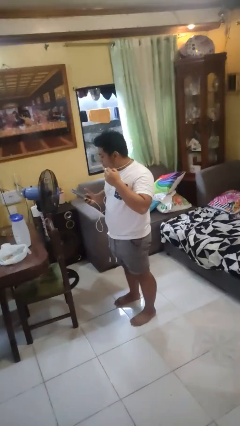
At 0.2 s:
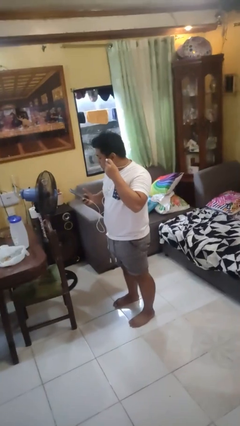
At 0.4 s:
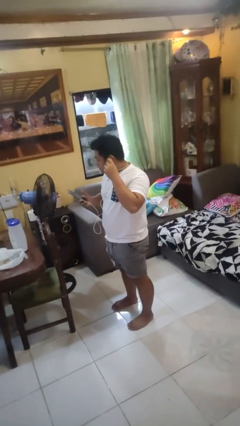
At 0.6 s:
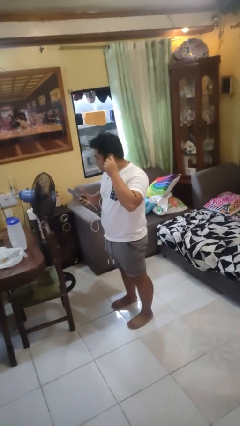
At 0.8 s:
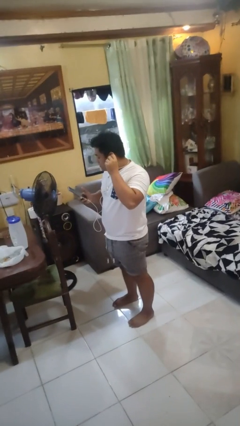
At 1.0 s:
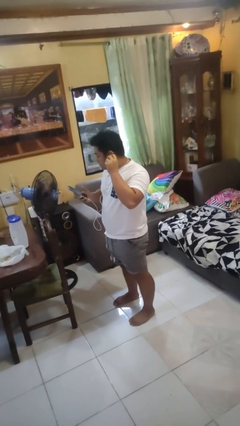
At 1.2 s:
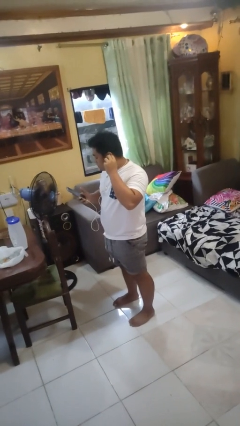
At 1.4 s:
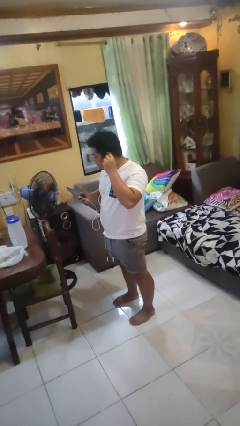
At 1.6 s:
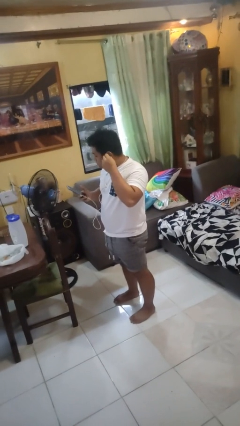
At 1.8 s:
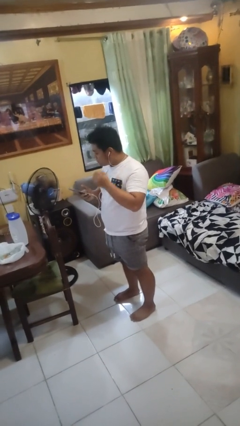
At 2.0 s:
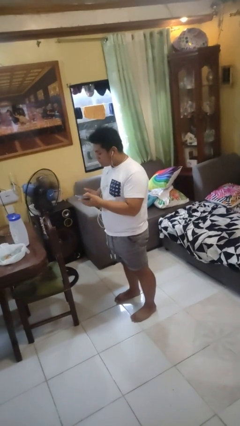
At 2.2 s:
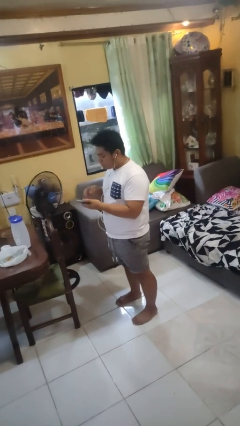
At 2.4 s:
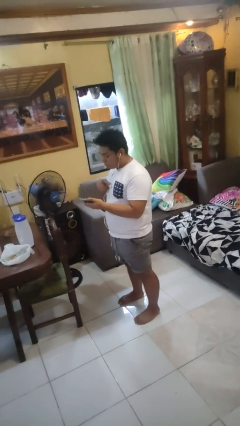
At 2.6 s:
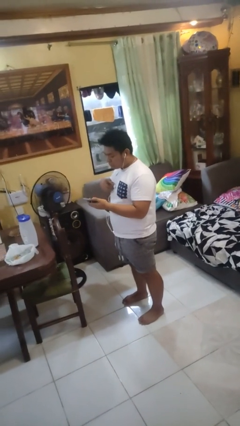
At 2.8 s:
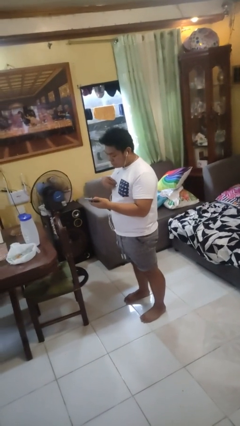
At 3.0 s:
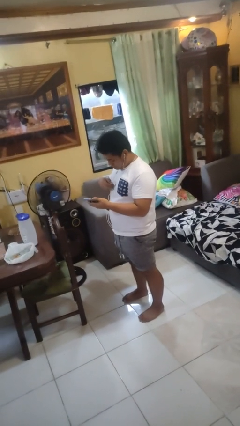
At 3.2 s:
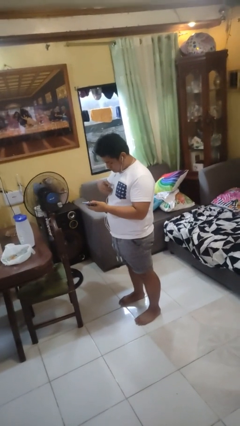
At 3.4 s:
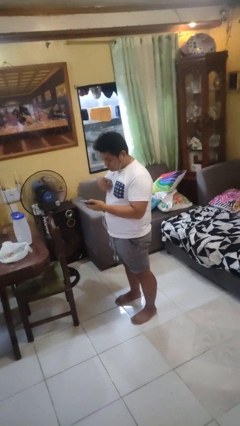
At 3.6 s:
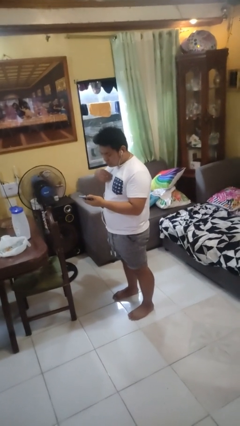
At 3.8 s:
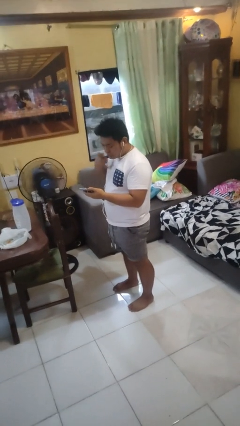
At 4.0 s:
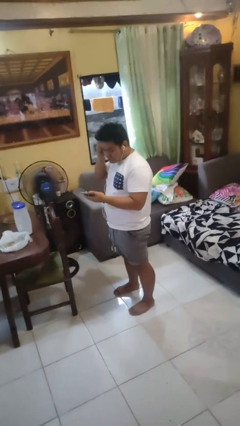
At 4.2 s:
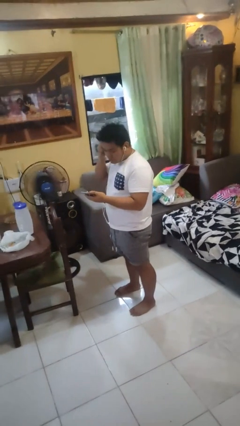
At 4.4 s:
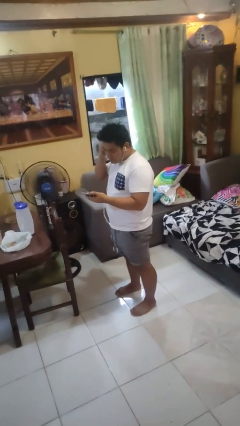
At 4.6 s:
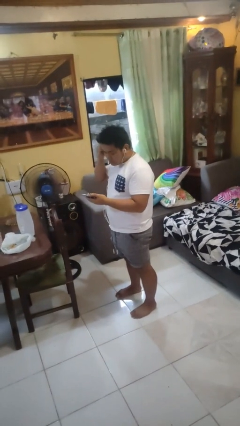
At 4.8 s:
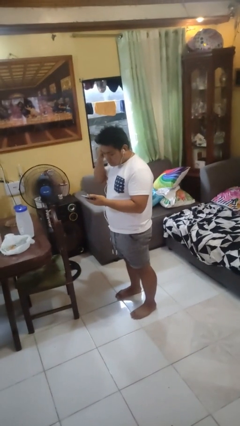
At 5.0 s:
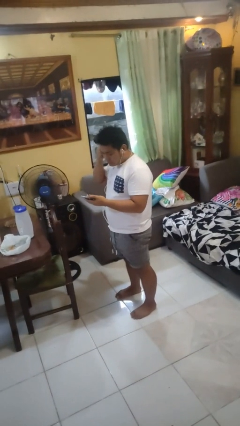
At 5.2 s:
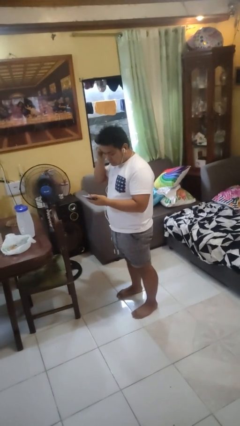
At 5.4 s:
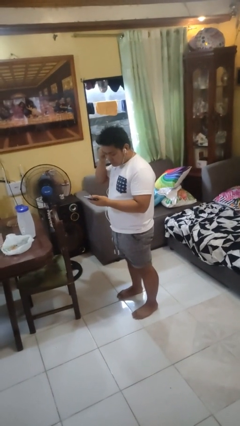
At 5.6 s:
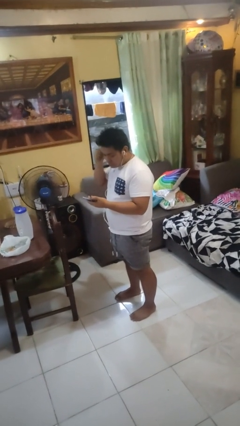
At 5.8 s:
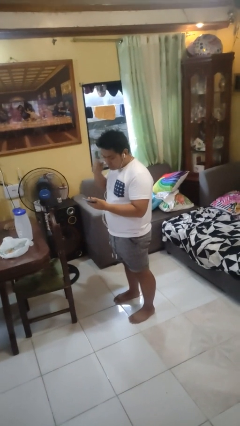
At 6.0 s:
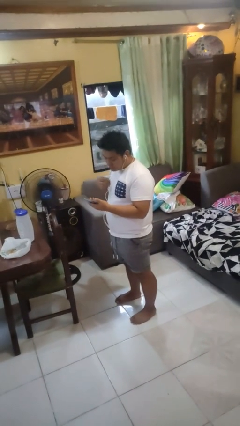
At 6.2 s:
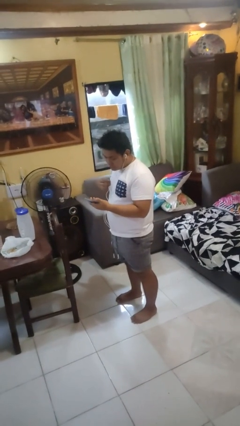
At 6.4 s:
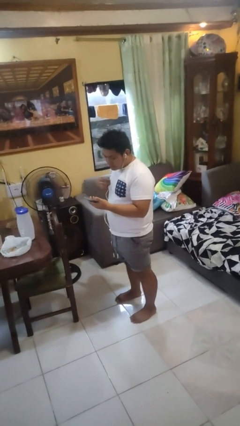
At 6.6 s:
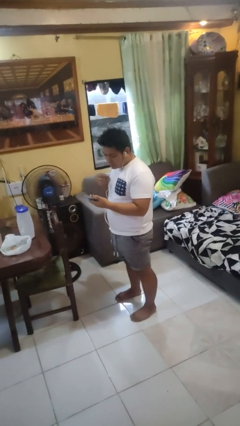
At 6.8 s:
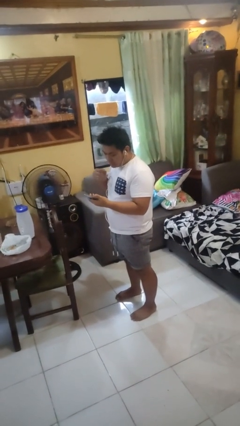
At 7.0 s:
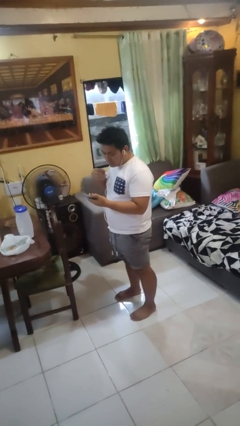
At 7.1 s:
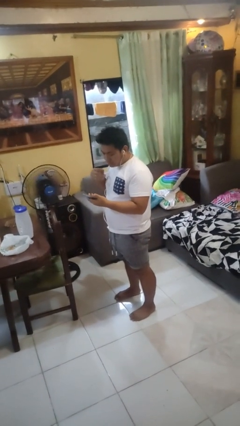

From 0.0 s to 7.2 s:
person puts on headphones

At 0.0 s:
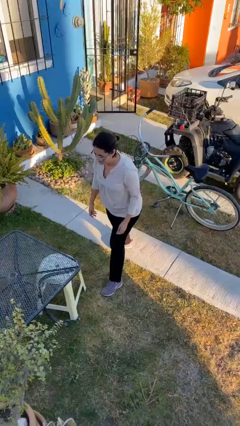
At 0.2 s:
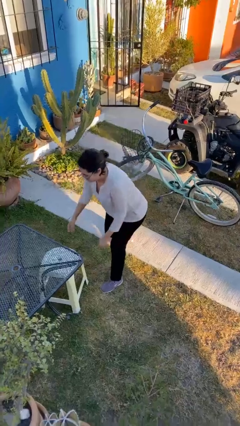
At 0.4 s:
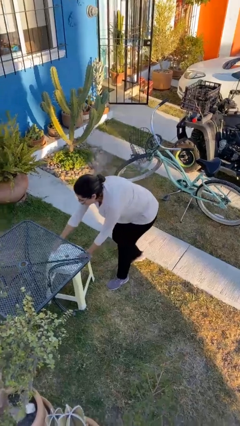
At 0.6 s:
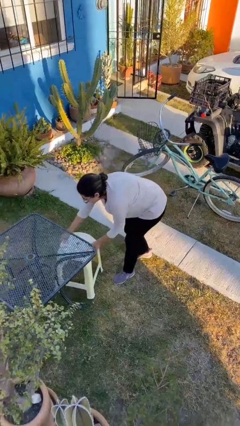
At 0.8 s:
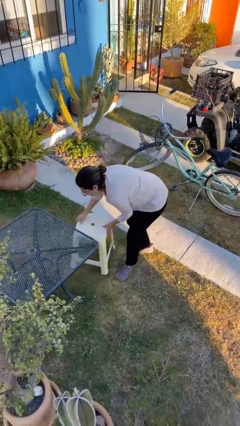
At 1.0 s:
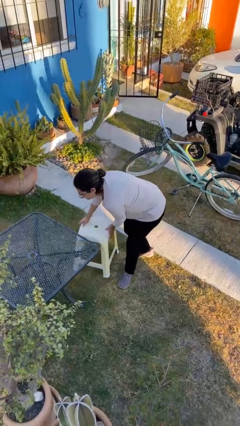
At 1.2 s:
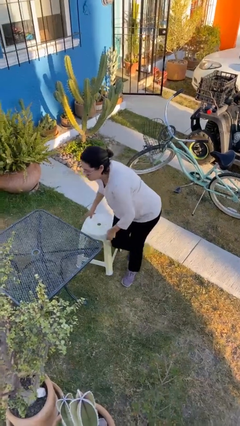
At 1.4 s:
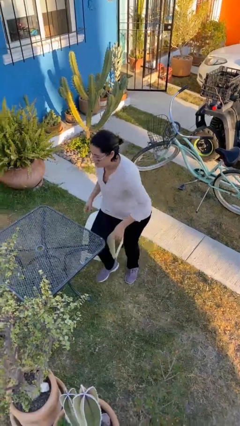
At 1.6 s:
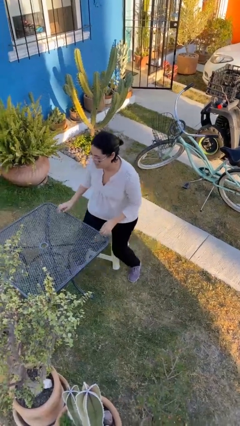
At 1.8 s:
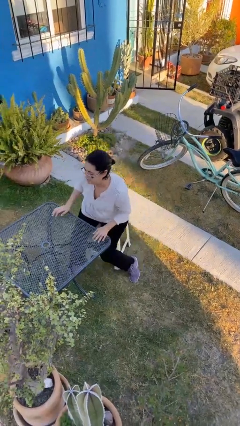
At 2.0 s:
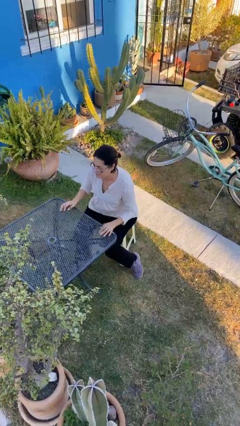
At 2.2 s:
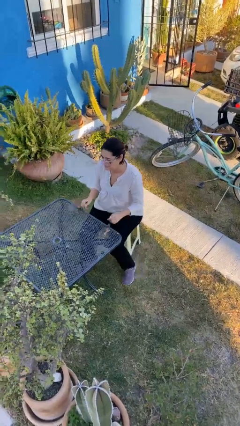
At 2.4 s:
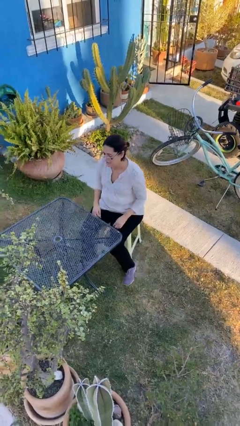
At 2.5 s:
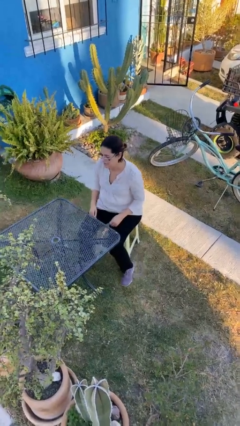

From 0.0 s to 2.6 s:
person sits down

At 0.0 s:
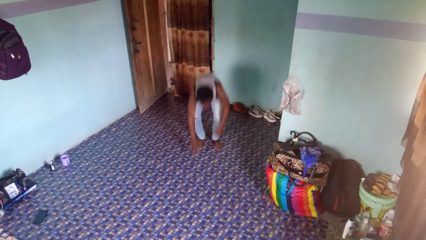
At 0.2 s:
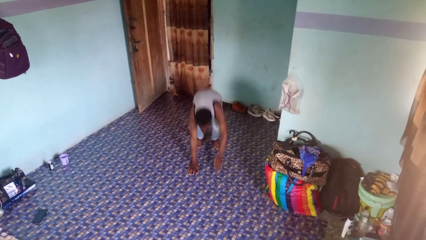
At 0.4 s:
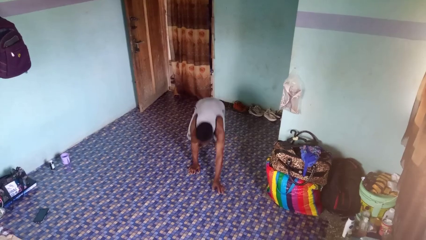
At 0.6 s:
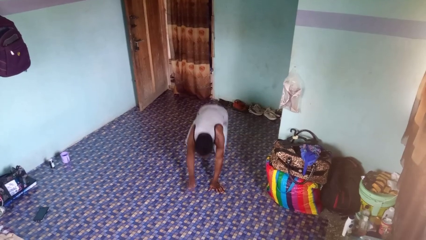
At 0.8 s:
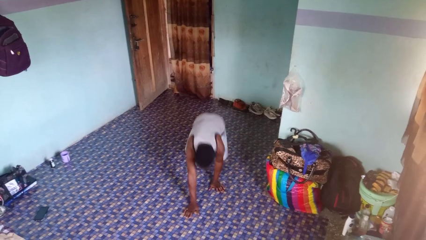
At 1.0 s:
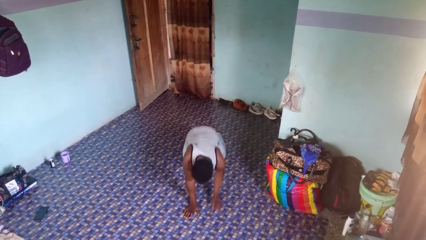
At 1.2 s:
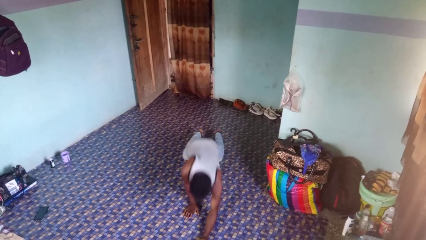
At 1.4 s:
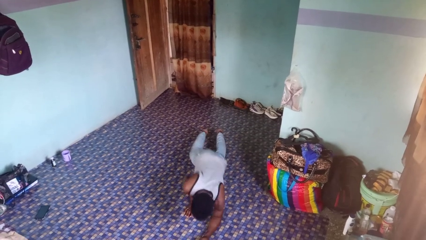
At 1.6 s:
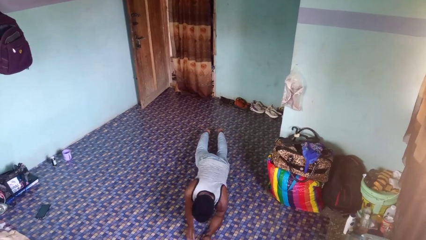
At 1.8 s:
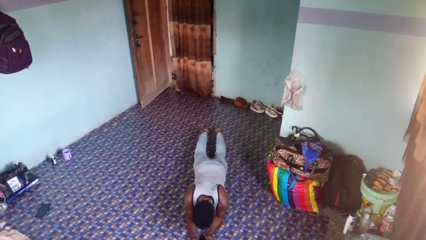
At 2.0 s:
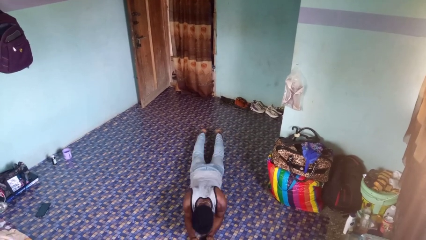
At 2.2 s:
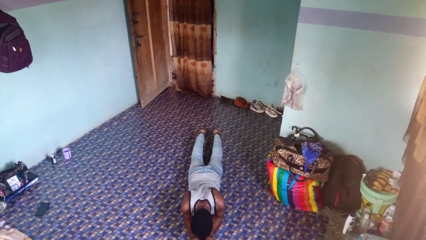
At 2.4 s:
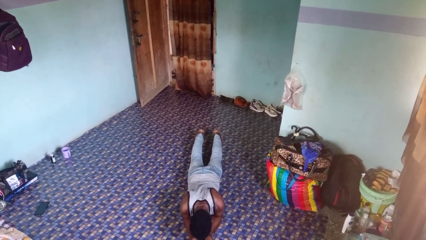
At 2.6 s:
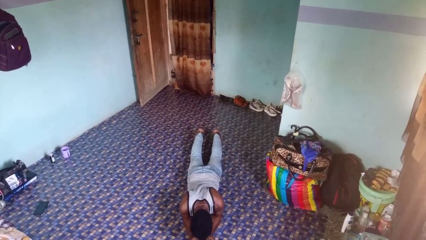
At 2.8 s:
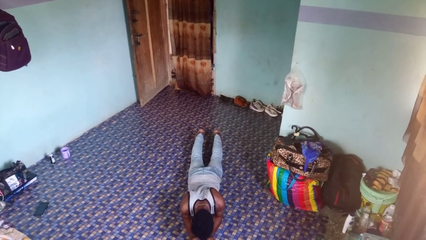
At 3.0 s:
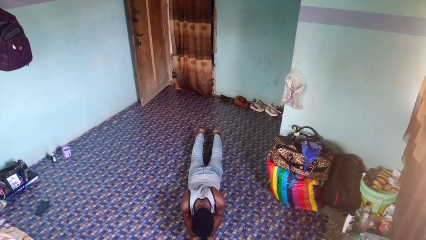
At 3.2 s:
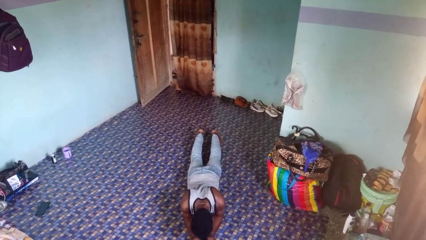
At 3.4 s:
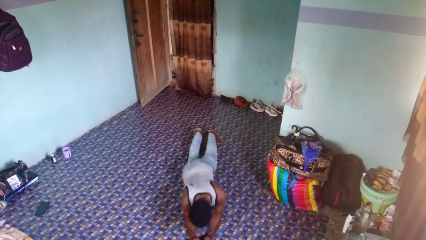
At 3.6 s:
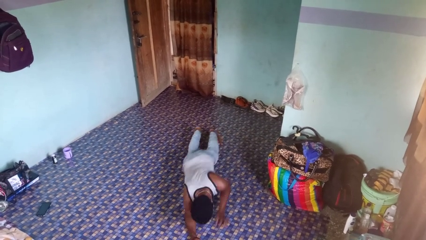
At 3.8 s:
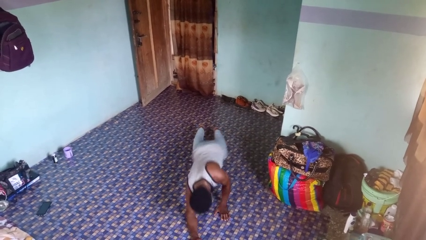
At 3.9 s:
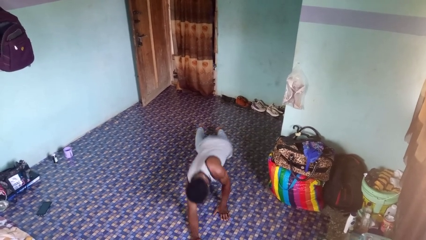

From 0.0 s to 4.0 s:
person exercises with plank

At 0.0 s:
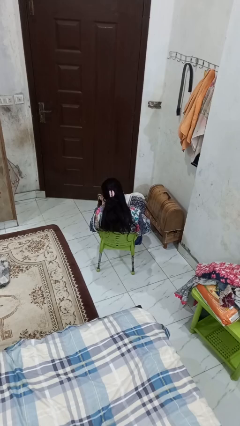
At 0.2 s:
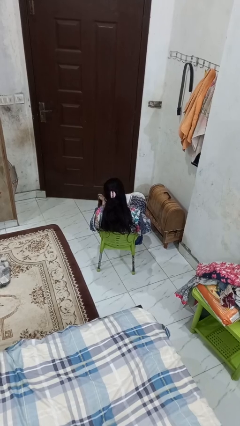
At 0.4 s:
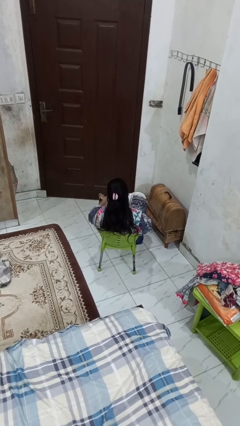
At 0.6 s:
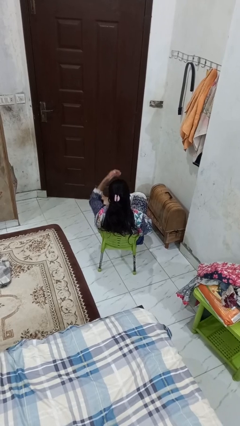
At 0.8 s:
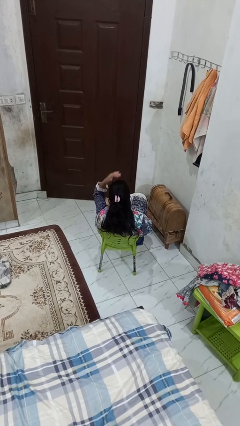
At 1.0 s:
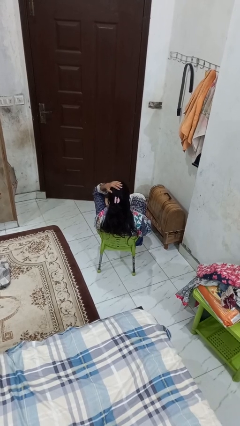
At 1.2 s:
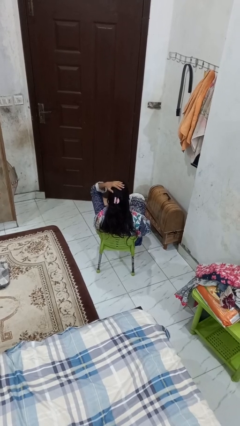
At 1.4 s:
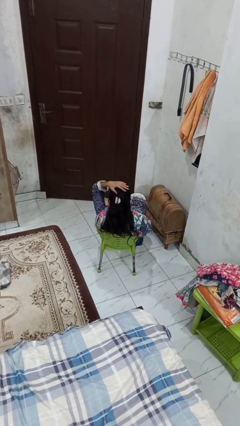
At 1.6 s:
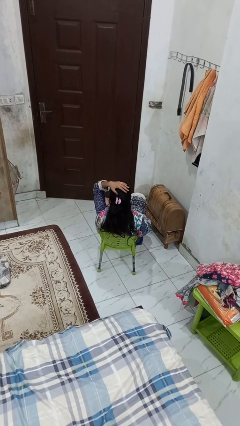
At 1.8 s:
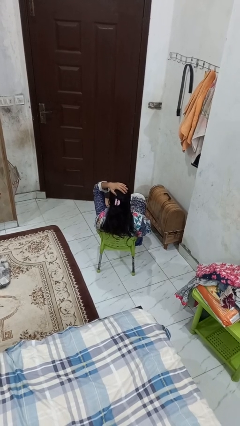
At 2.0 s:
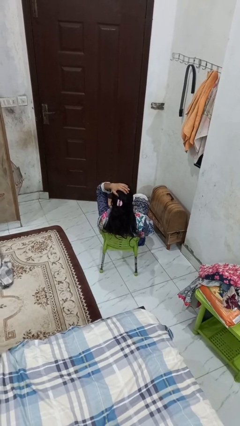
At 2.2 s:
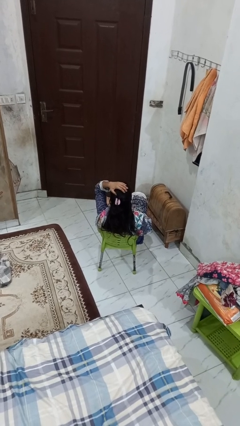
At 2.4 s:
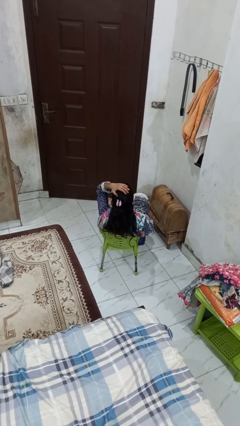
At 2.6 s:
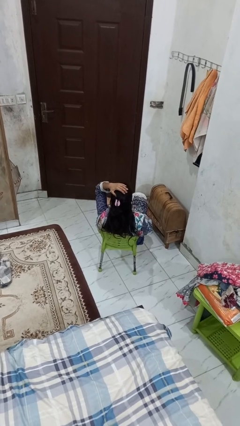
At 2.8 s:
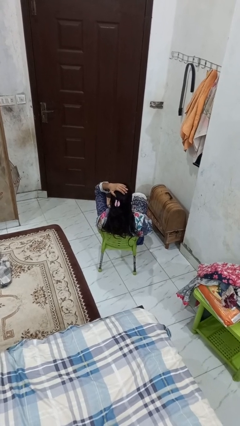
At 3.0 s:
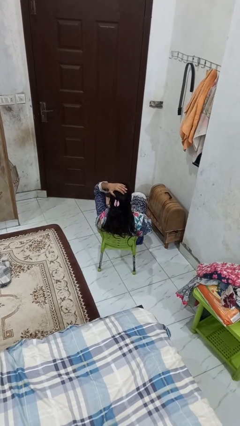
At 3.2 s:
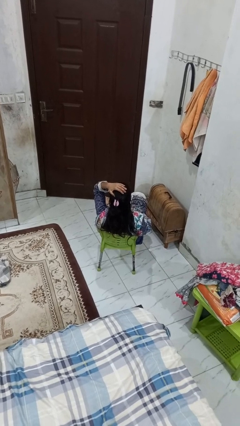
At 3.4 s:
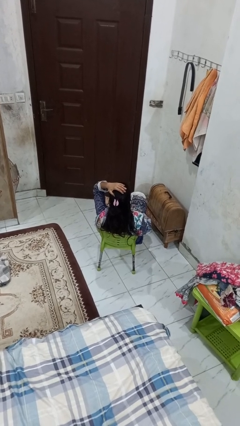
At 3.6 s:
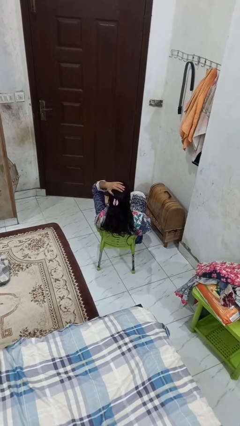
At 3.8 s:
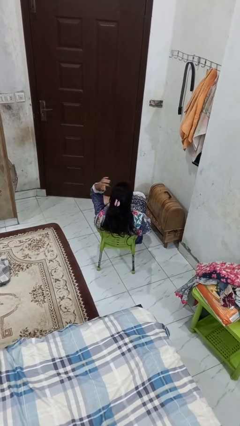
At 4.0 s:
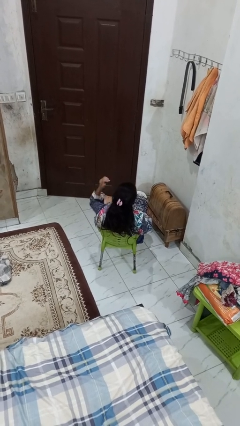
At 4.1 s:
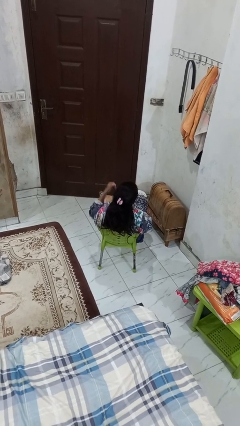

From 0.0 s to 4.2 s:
person pats head
